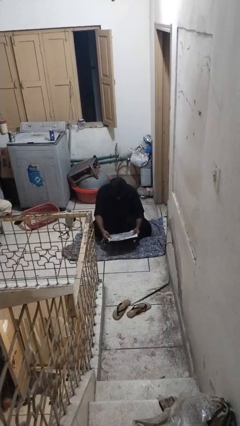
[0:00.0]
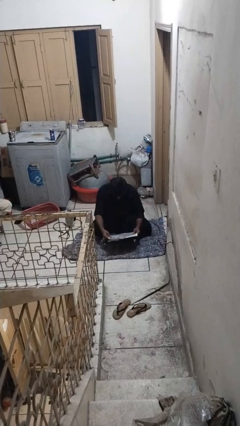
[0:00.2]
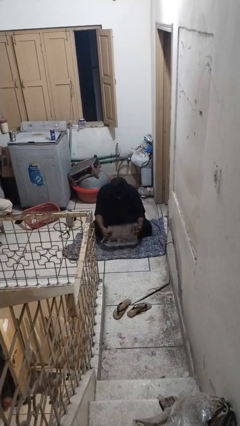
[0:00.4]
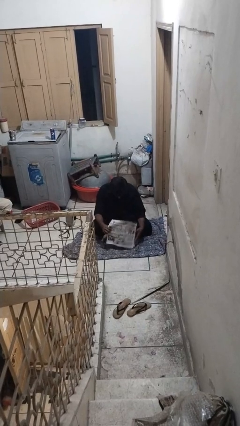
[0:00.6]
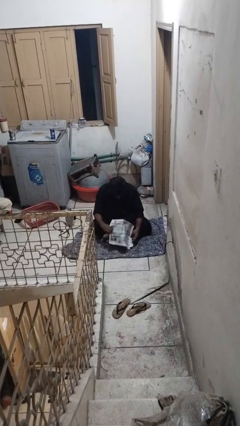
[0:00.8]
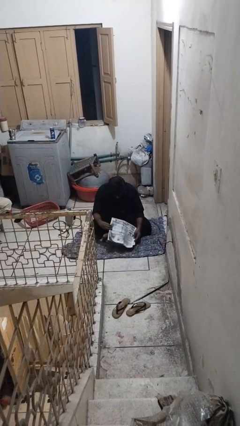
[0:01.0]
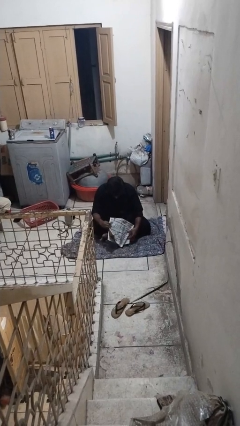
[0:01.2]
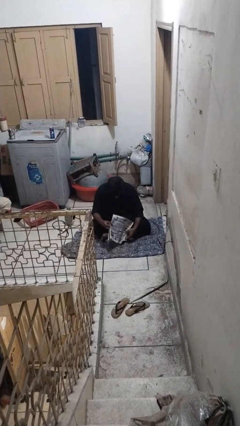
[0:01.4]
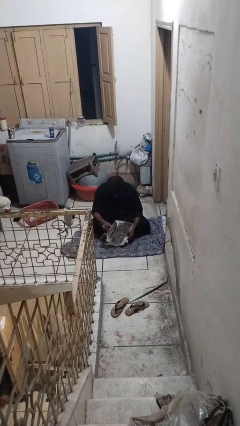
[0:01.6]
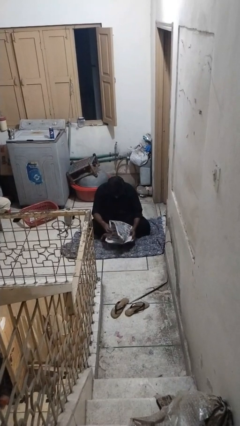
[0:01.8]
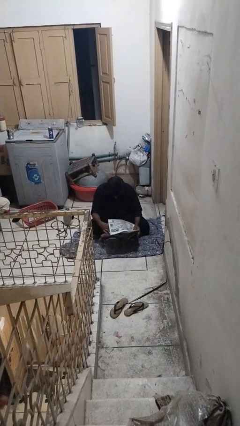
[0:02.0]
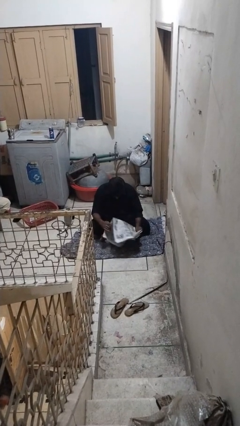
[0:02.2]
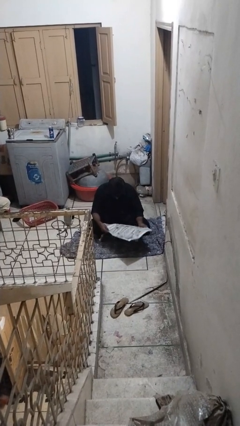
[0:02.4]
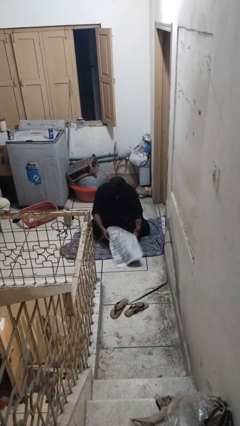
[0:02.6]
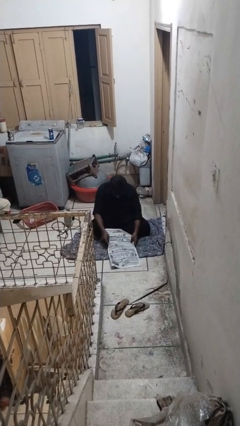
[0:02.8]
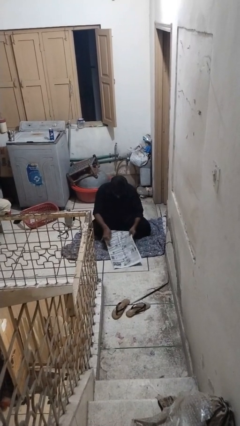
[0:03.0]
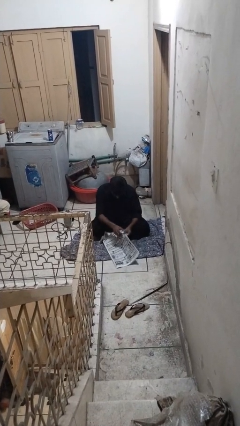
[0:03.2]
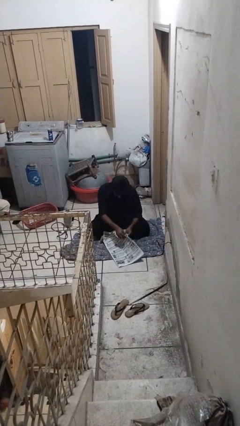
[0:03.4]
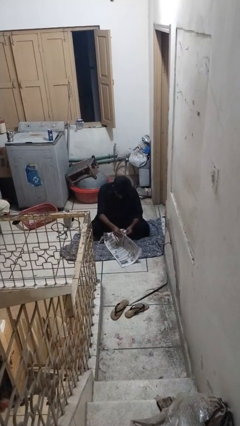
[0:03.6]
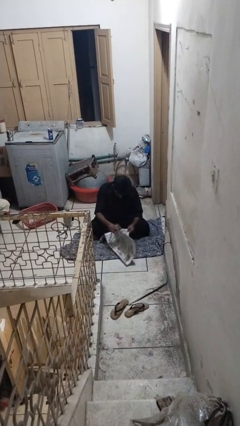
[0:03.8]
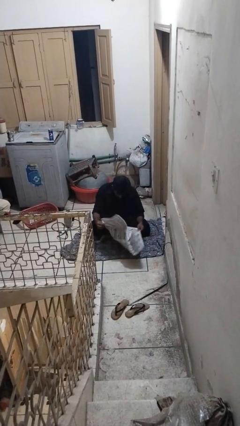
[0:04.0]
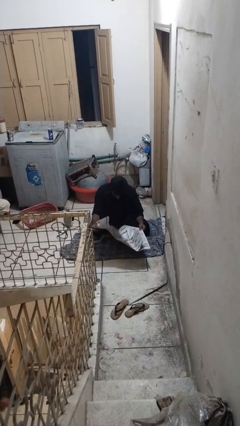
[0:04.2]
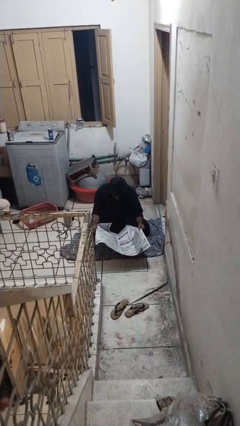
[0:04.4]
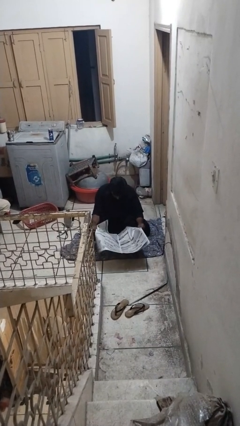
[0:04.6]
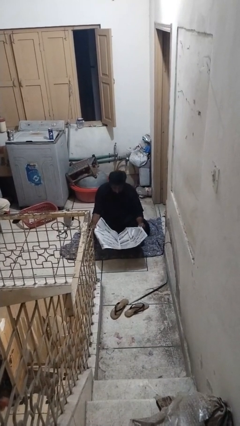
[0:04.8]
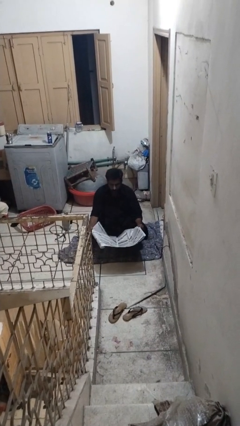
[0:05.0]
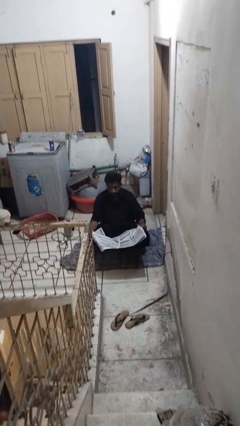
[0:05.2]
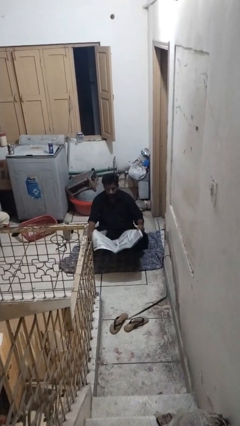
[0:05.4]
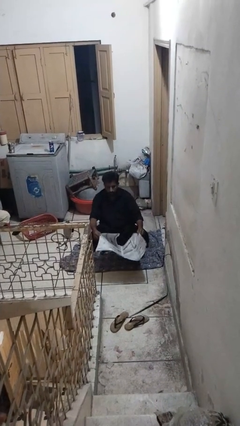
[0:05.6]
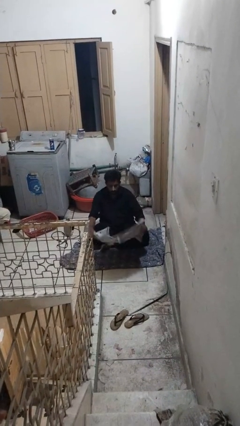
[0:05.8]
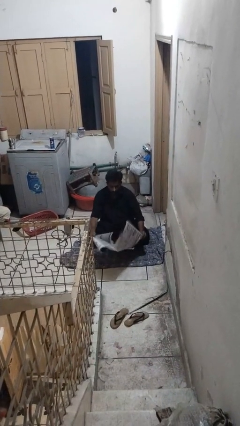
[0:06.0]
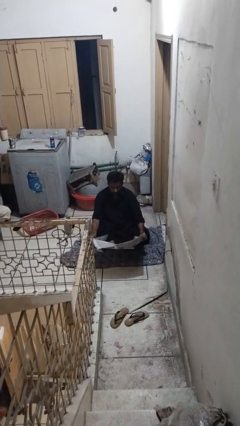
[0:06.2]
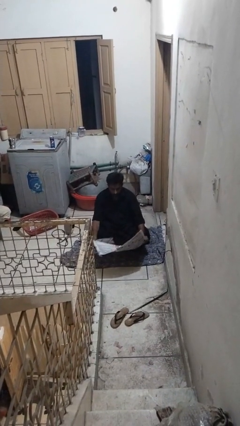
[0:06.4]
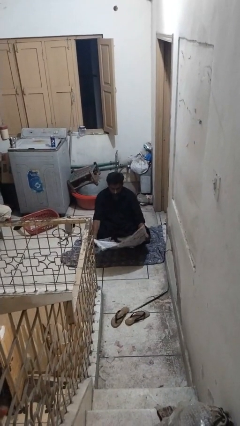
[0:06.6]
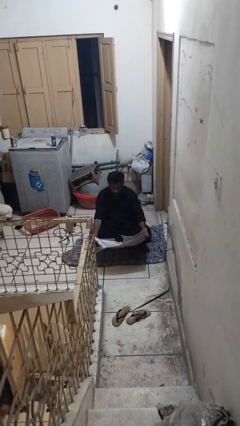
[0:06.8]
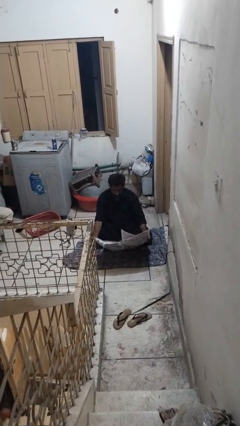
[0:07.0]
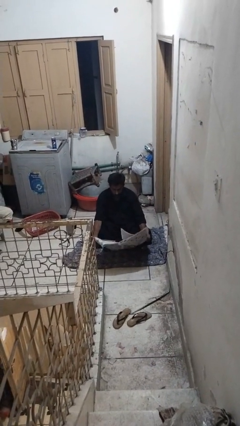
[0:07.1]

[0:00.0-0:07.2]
person reads newspaper

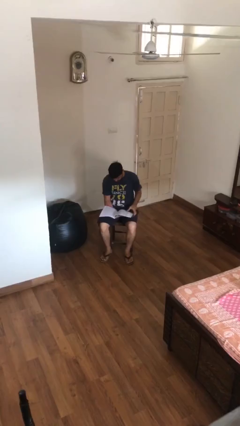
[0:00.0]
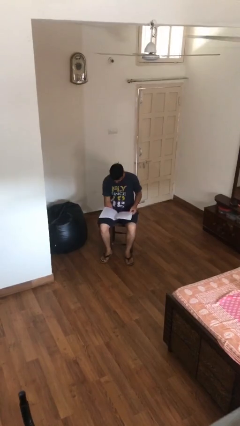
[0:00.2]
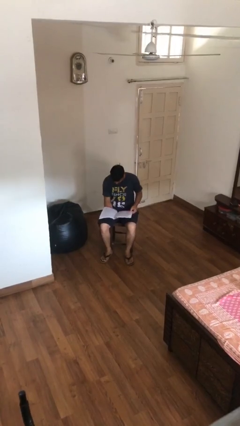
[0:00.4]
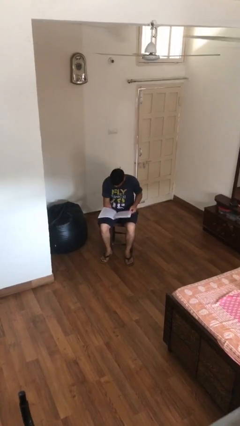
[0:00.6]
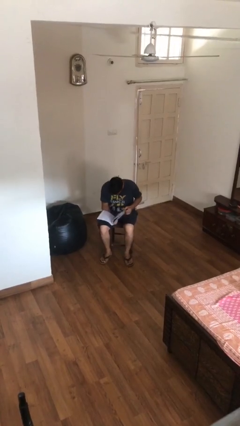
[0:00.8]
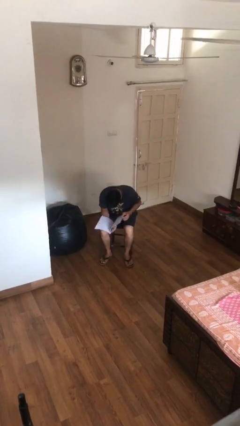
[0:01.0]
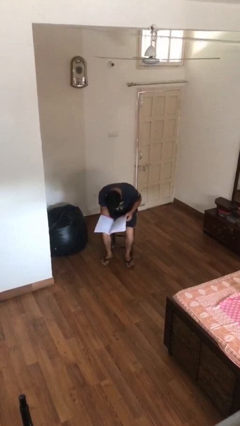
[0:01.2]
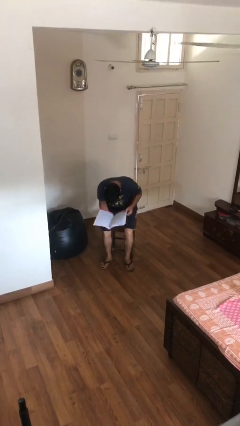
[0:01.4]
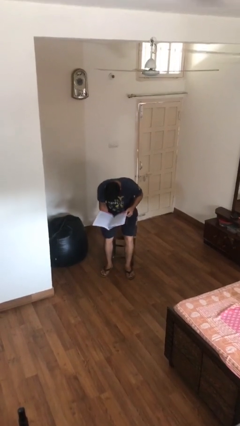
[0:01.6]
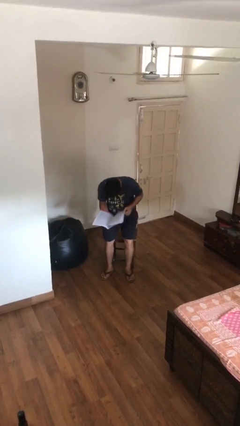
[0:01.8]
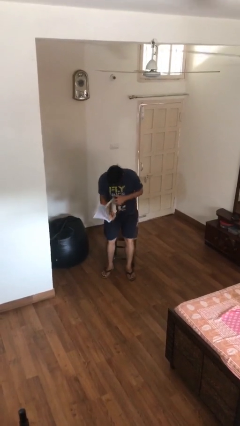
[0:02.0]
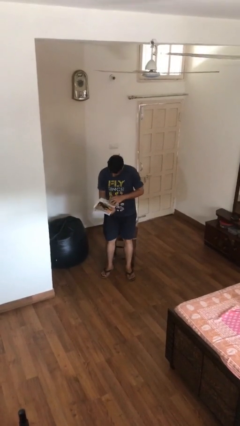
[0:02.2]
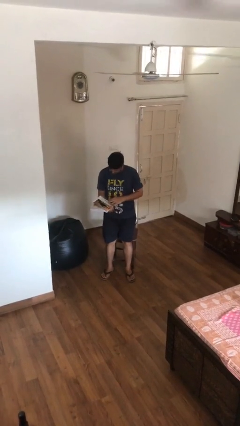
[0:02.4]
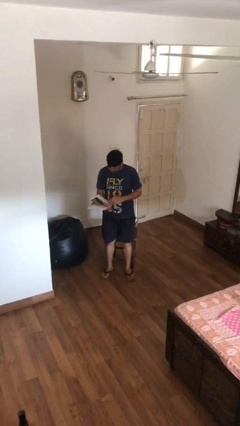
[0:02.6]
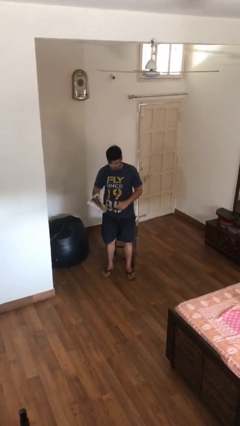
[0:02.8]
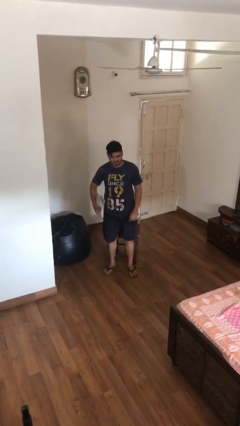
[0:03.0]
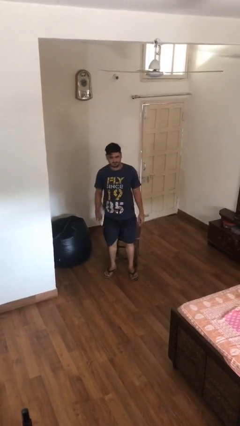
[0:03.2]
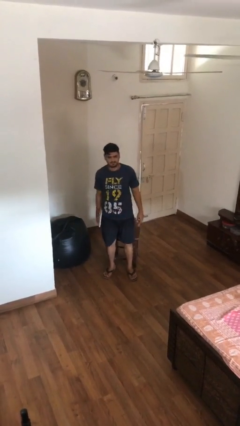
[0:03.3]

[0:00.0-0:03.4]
person stands up

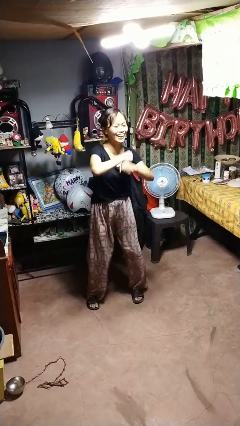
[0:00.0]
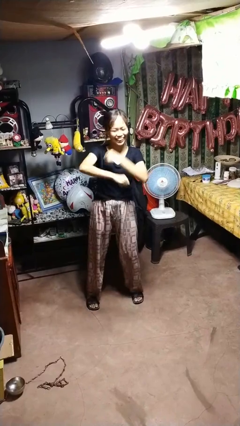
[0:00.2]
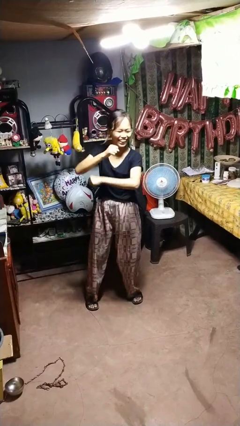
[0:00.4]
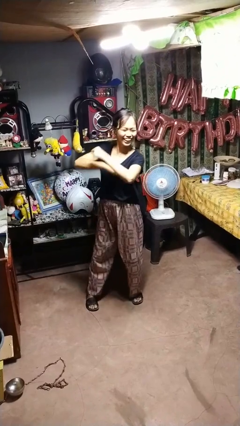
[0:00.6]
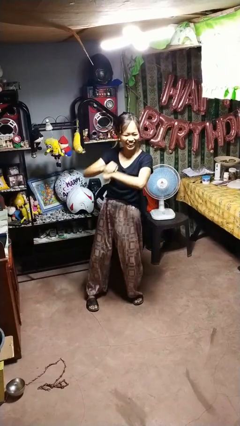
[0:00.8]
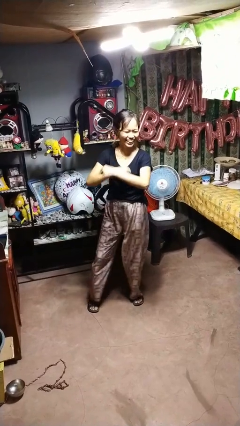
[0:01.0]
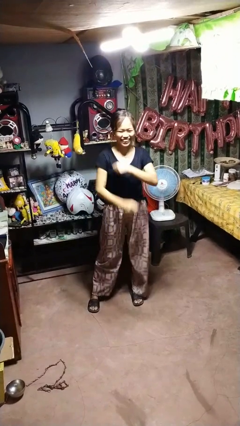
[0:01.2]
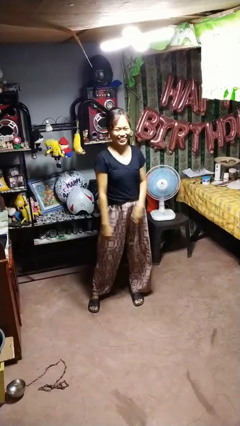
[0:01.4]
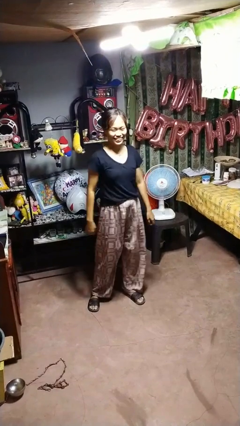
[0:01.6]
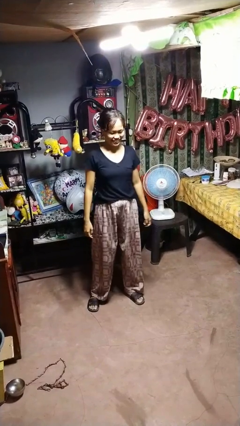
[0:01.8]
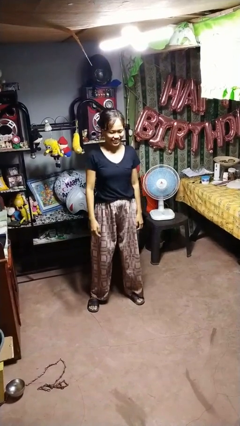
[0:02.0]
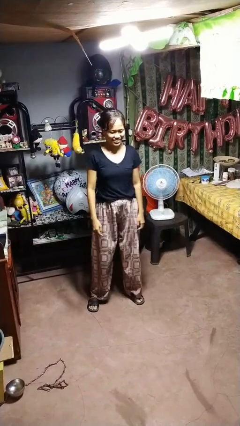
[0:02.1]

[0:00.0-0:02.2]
person dances in place

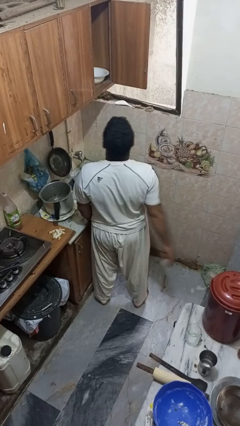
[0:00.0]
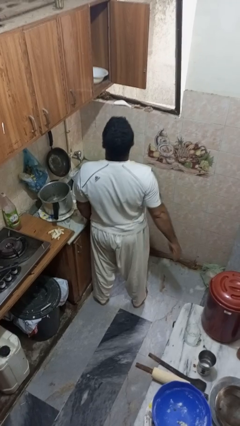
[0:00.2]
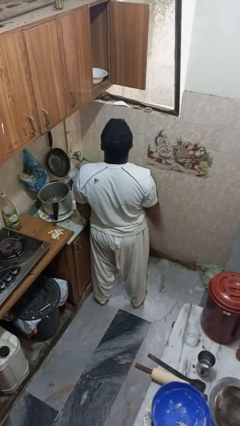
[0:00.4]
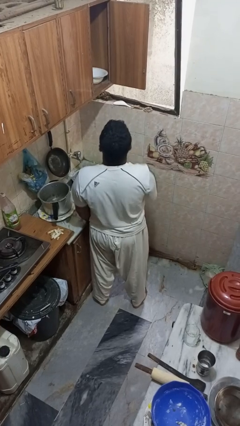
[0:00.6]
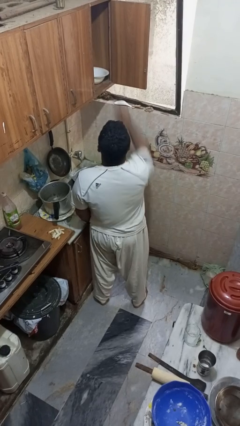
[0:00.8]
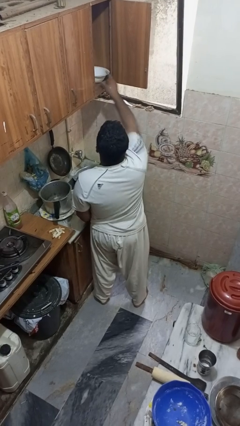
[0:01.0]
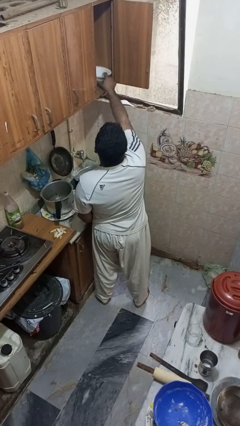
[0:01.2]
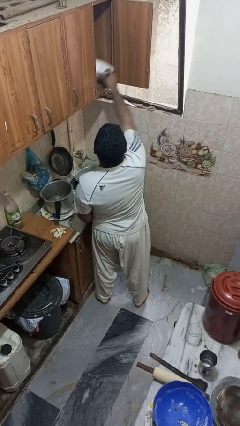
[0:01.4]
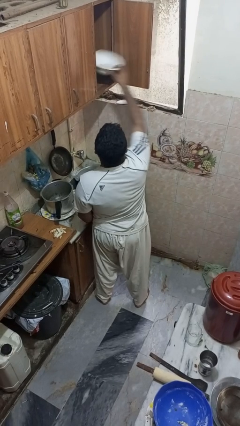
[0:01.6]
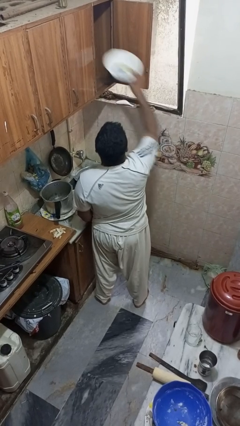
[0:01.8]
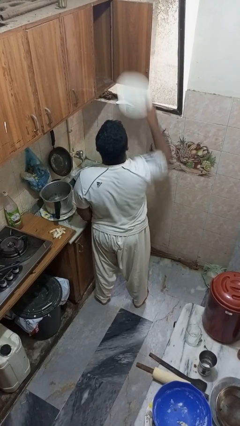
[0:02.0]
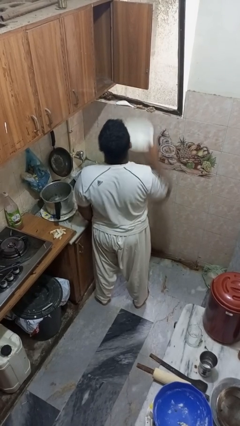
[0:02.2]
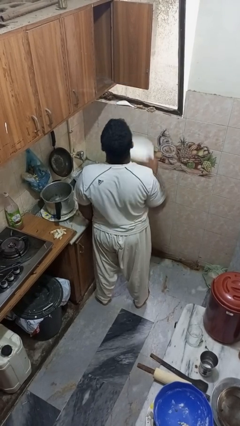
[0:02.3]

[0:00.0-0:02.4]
person takes object from cabinet

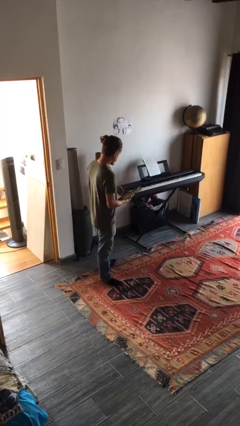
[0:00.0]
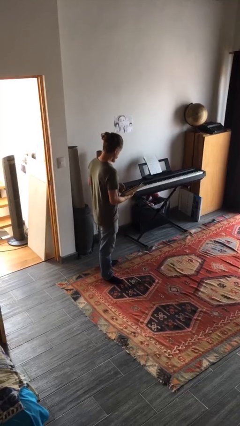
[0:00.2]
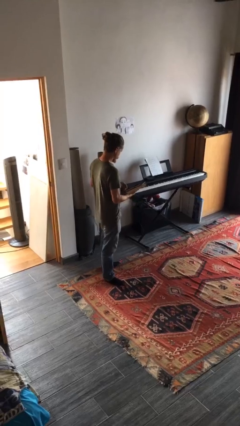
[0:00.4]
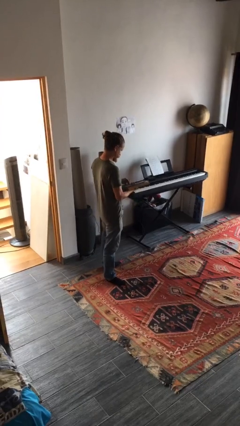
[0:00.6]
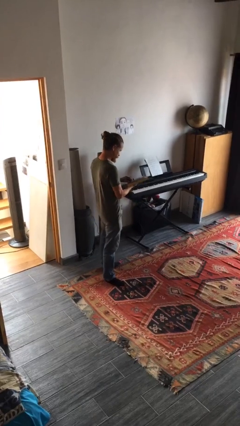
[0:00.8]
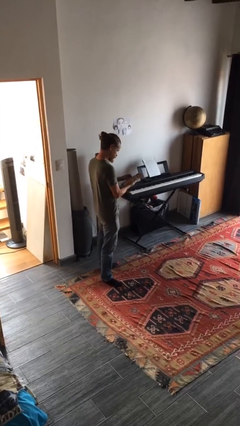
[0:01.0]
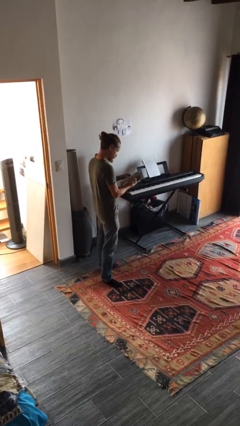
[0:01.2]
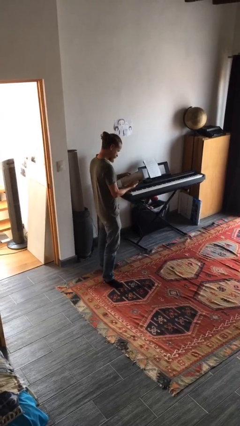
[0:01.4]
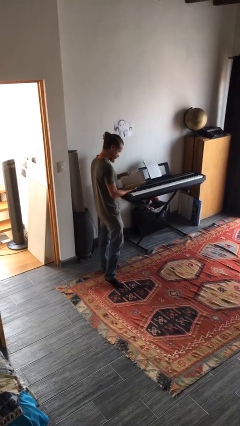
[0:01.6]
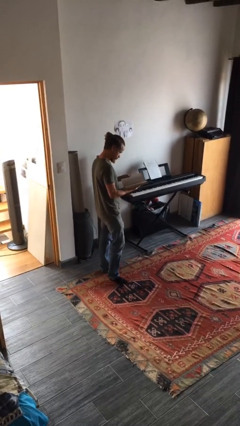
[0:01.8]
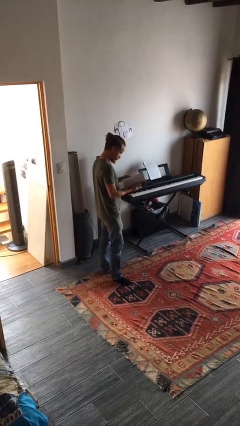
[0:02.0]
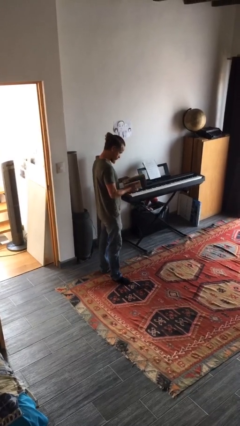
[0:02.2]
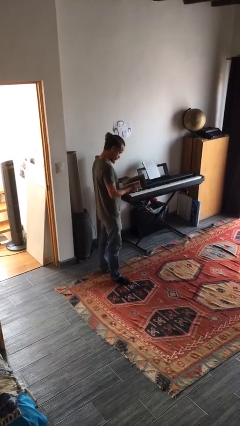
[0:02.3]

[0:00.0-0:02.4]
person reads book
